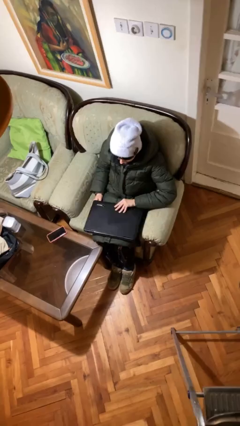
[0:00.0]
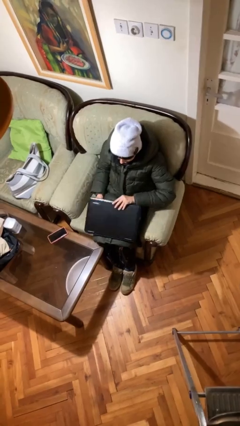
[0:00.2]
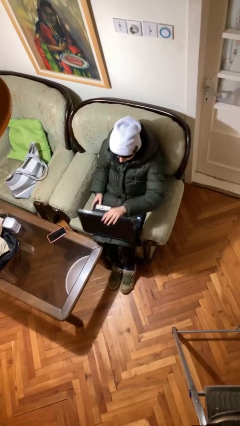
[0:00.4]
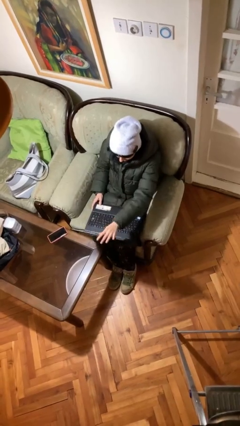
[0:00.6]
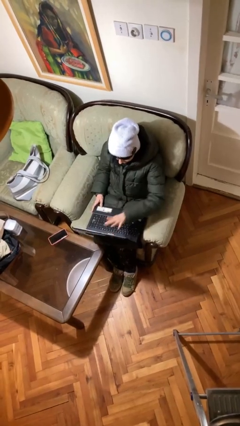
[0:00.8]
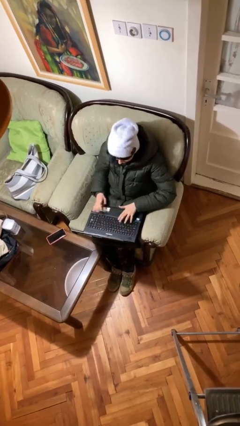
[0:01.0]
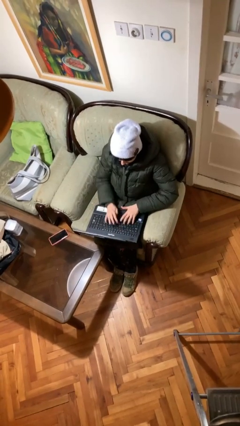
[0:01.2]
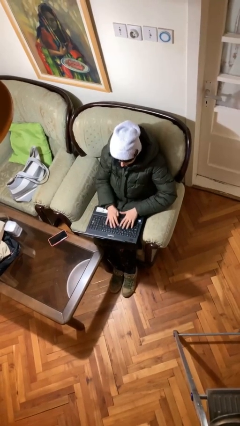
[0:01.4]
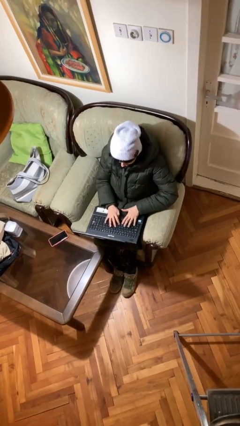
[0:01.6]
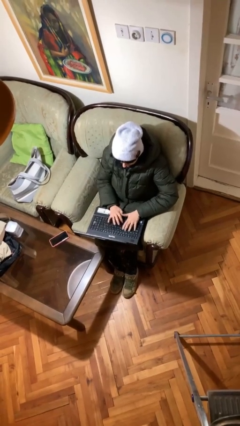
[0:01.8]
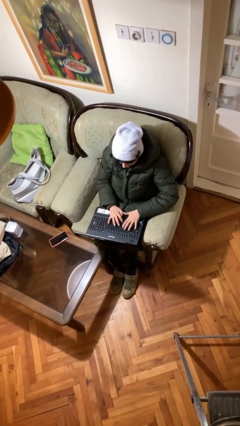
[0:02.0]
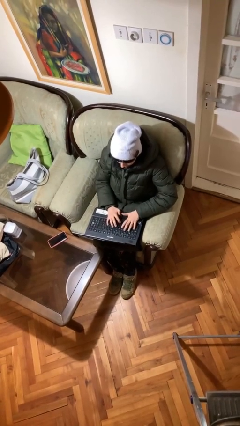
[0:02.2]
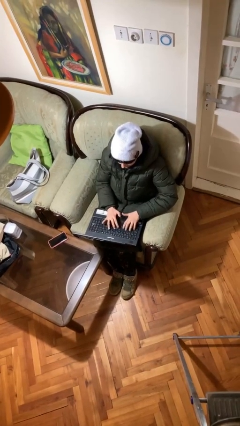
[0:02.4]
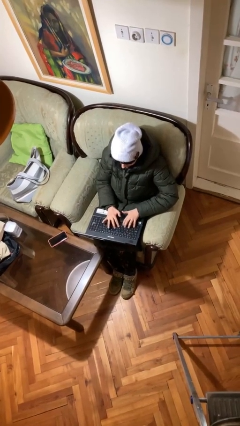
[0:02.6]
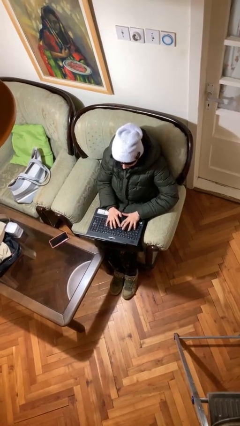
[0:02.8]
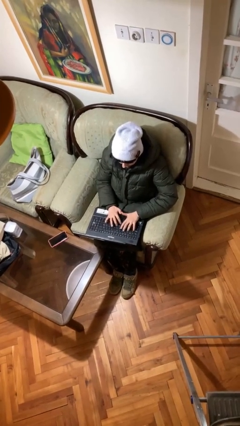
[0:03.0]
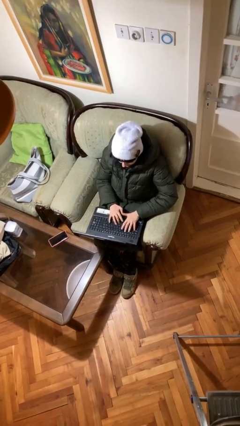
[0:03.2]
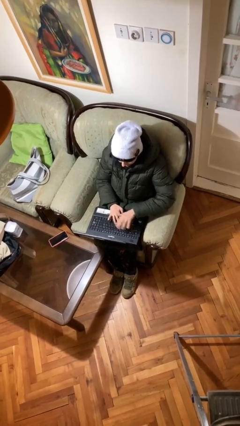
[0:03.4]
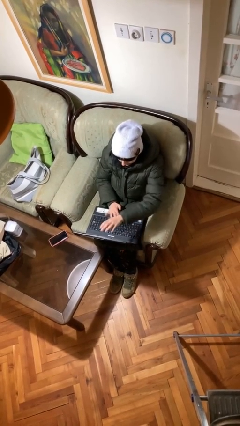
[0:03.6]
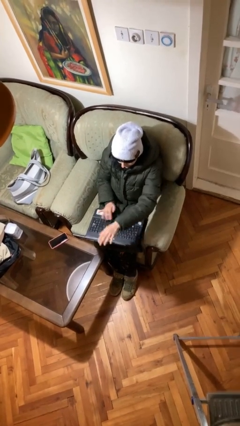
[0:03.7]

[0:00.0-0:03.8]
person interacts with laptop

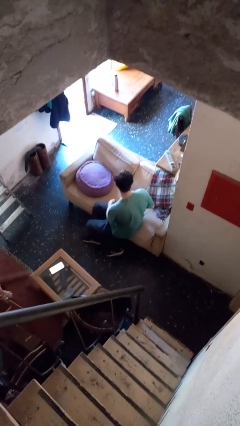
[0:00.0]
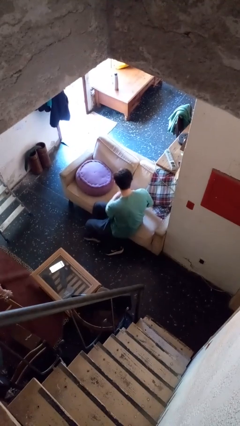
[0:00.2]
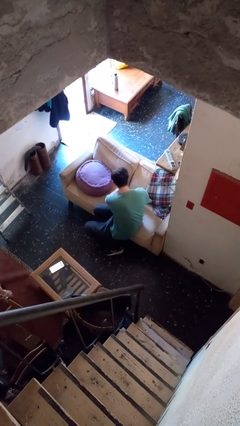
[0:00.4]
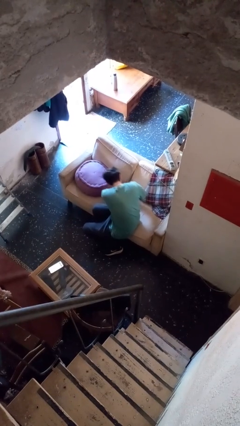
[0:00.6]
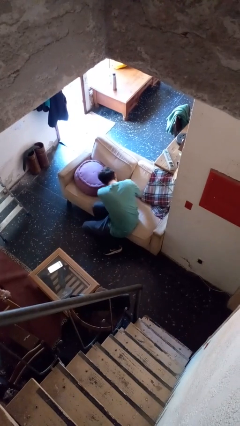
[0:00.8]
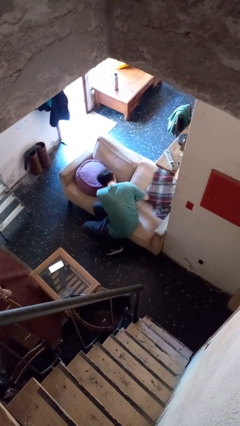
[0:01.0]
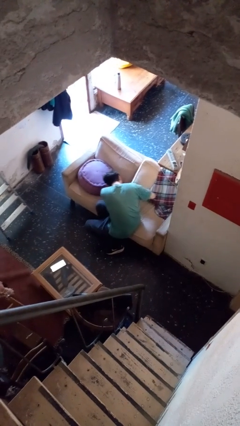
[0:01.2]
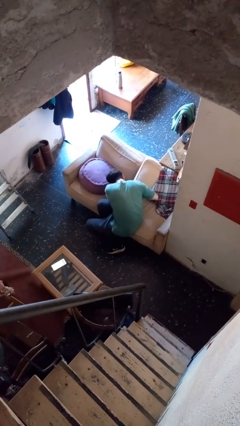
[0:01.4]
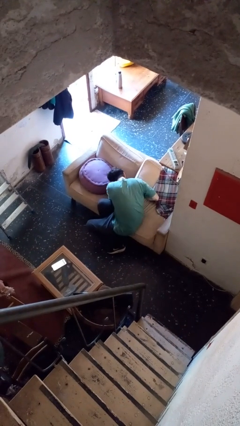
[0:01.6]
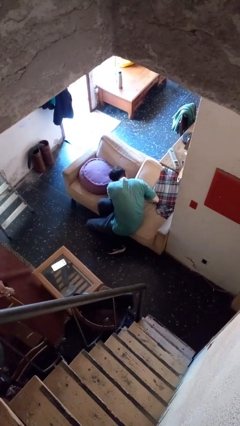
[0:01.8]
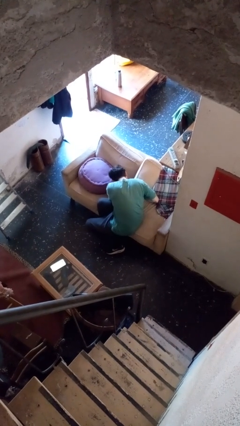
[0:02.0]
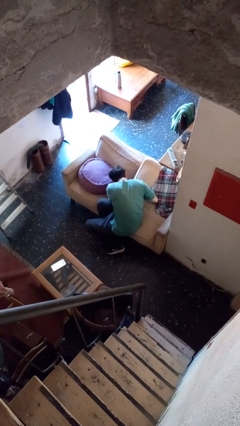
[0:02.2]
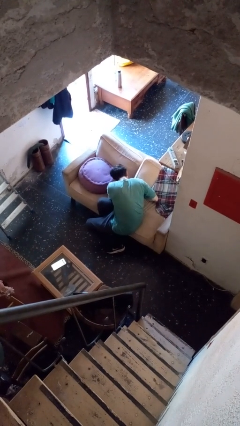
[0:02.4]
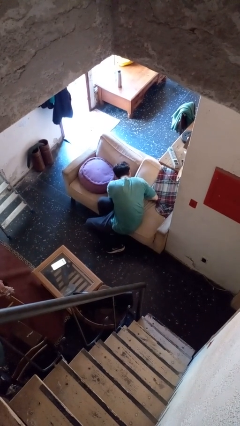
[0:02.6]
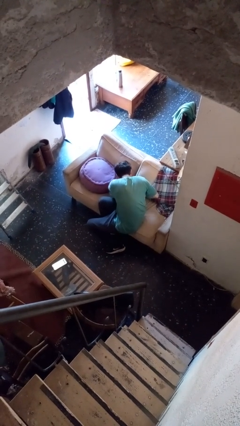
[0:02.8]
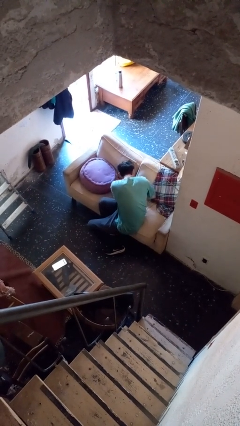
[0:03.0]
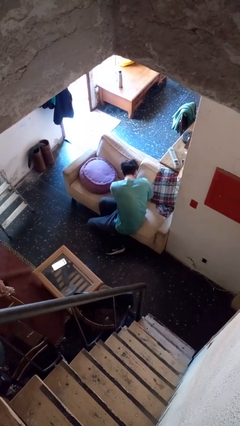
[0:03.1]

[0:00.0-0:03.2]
person searches in couch

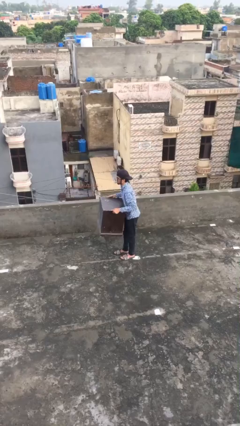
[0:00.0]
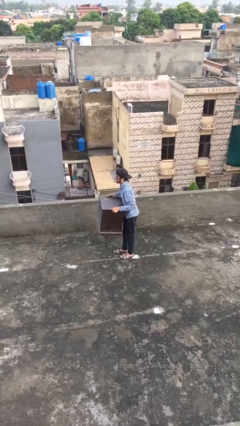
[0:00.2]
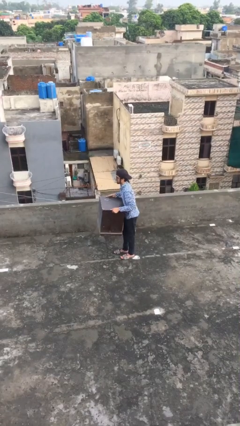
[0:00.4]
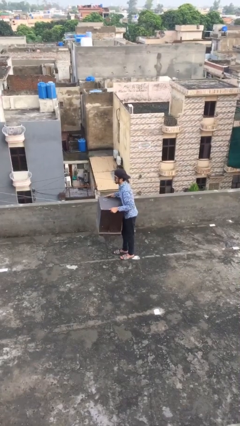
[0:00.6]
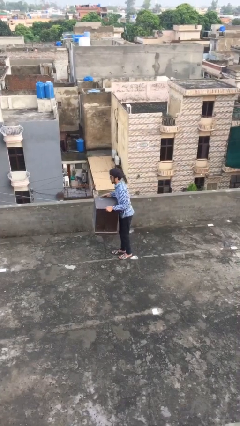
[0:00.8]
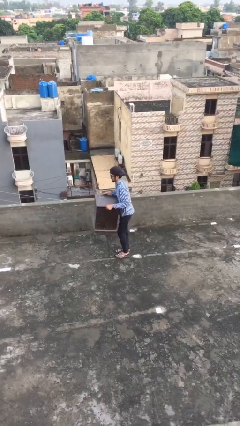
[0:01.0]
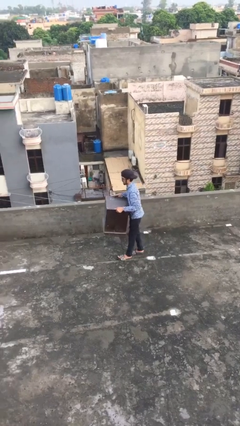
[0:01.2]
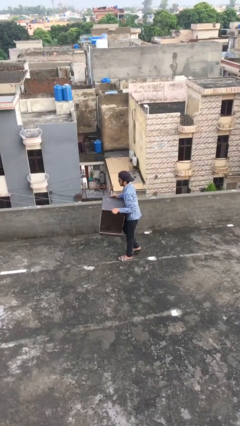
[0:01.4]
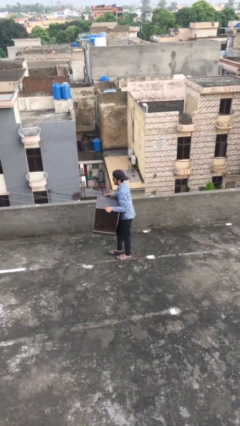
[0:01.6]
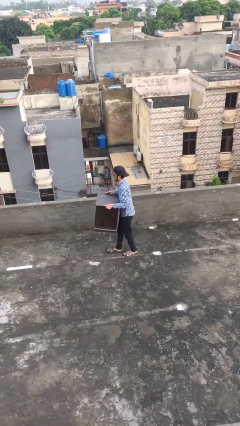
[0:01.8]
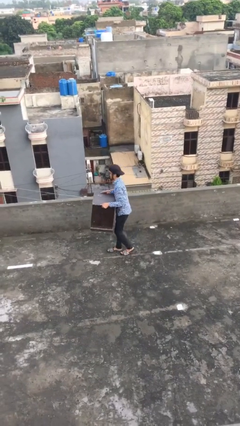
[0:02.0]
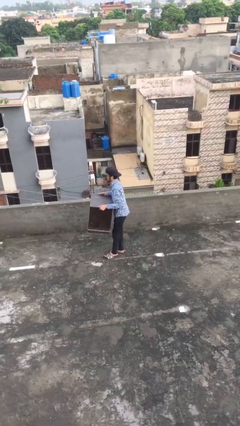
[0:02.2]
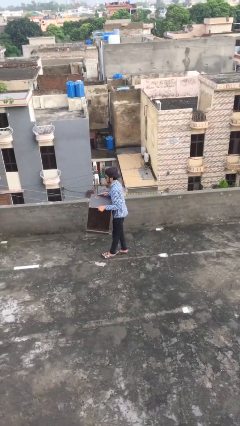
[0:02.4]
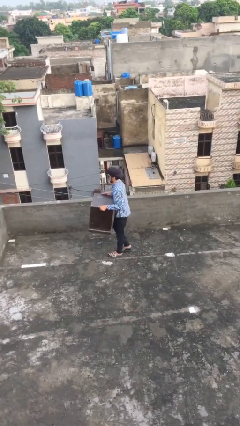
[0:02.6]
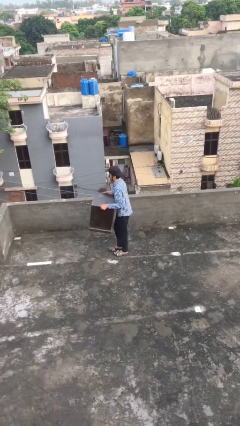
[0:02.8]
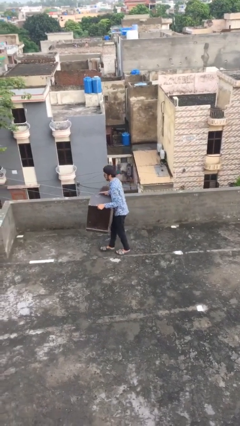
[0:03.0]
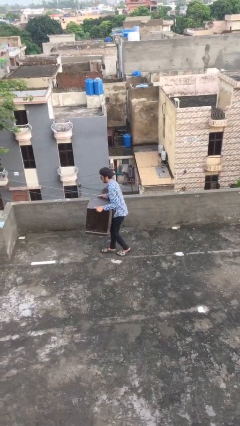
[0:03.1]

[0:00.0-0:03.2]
person carries heavy object

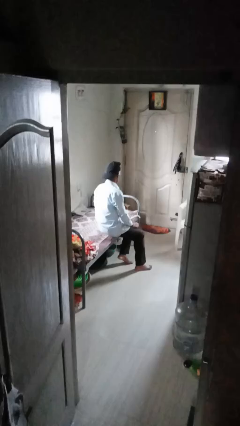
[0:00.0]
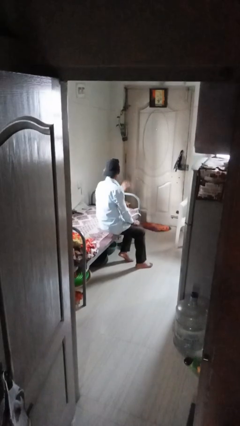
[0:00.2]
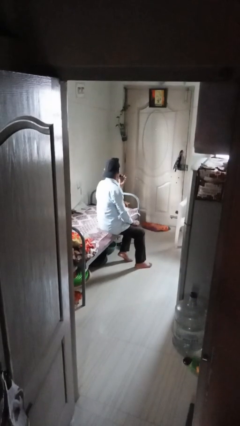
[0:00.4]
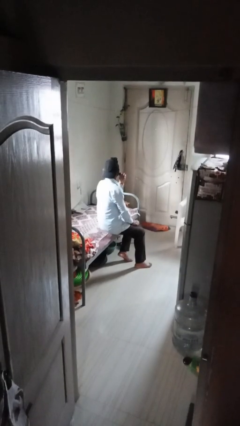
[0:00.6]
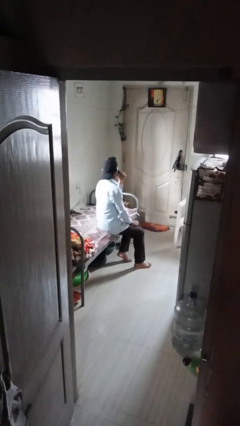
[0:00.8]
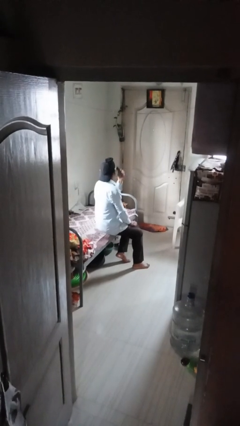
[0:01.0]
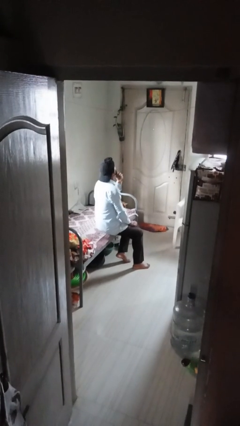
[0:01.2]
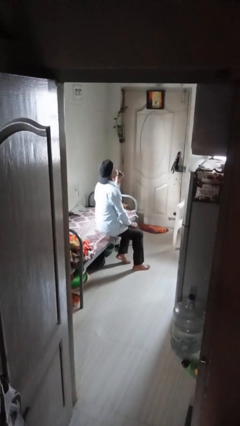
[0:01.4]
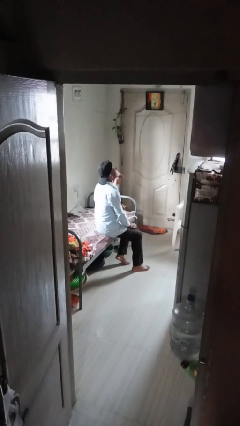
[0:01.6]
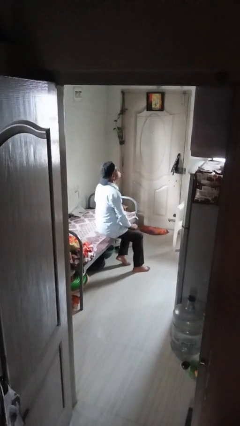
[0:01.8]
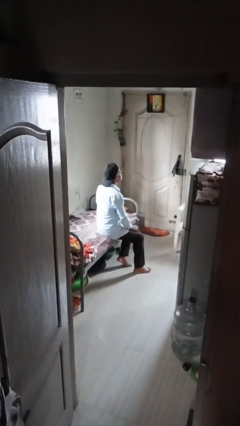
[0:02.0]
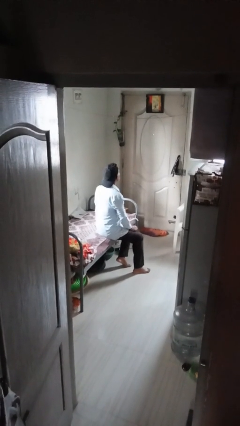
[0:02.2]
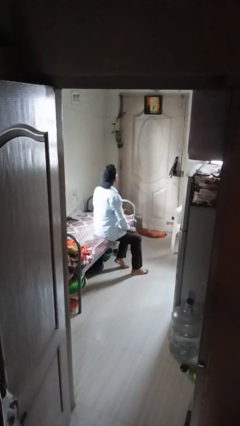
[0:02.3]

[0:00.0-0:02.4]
person applies shaving cream

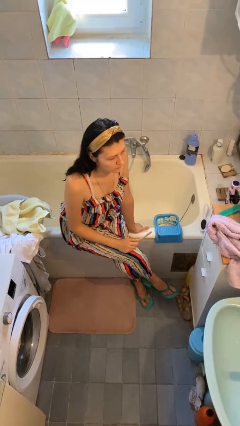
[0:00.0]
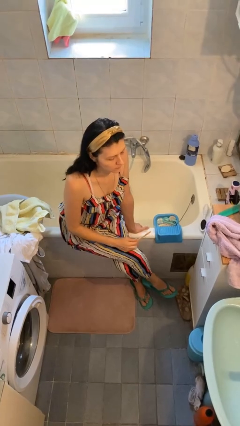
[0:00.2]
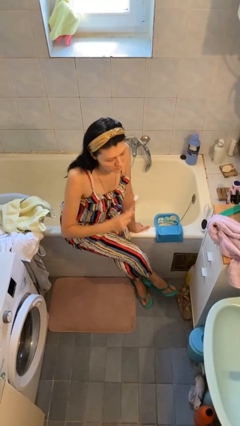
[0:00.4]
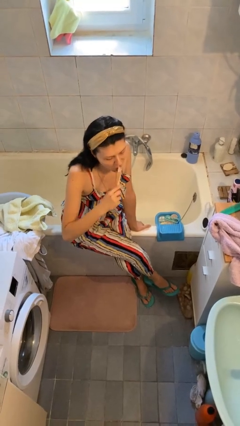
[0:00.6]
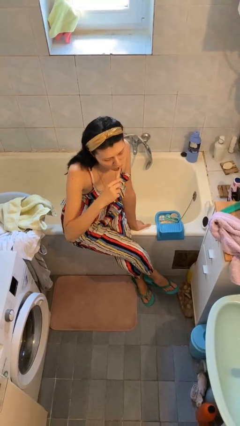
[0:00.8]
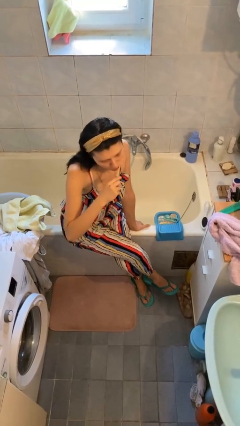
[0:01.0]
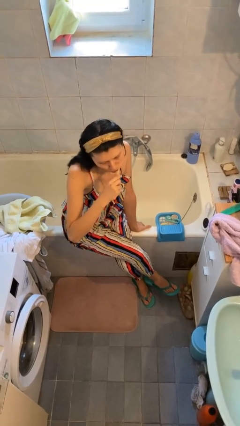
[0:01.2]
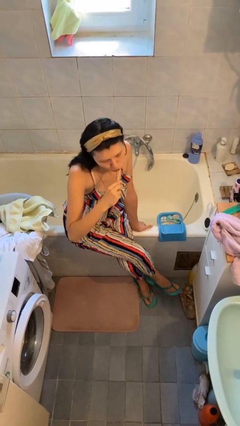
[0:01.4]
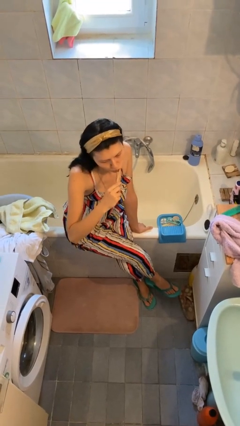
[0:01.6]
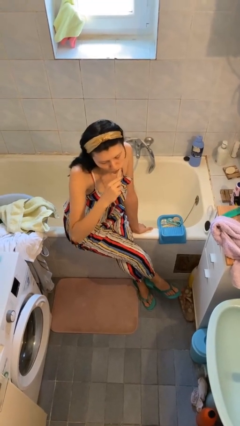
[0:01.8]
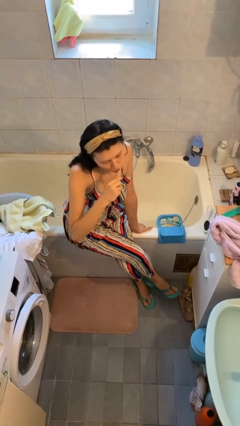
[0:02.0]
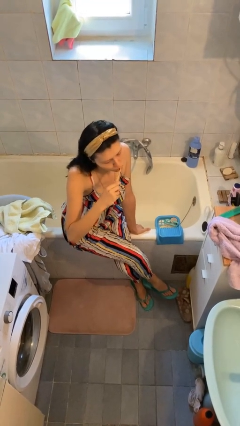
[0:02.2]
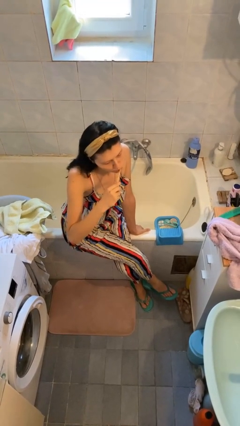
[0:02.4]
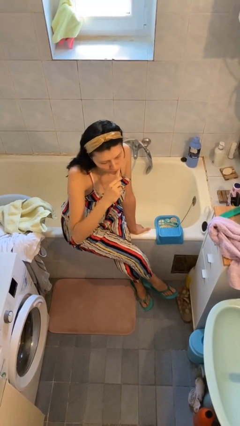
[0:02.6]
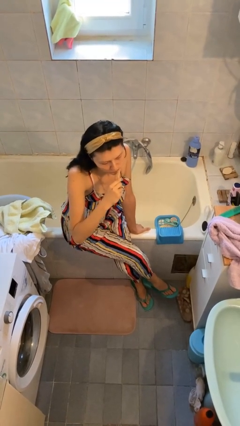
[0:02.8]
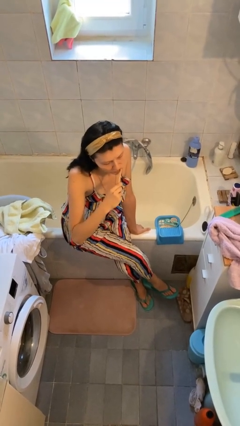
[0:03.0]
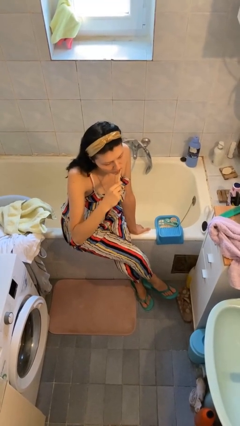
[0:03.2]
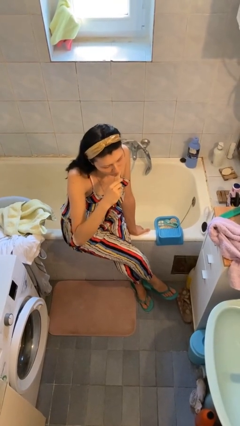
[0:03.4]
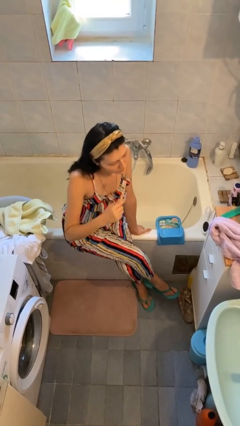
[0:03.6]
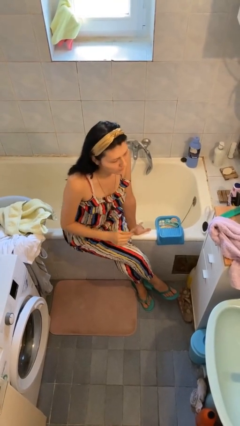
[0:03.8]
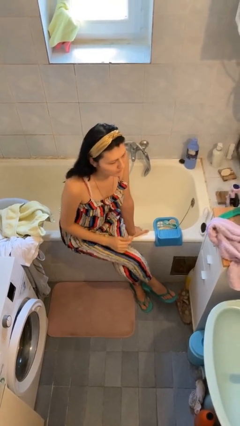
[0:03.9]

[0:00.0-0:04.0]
person brushes teeth

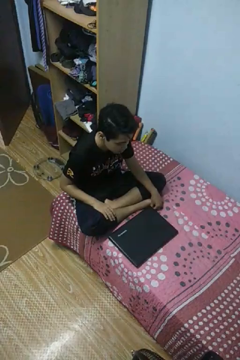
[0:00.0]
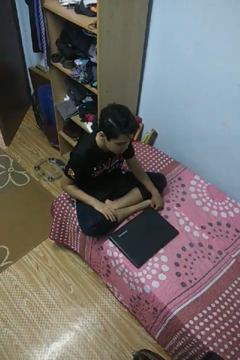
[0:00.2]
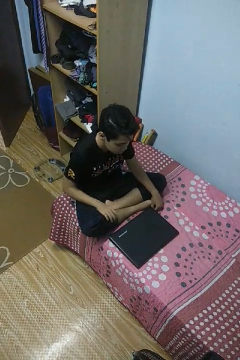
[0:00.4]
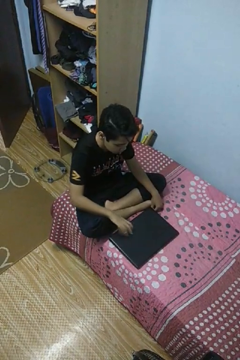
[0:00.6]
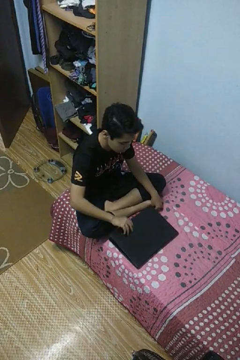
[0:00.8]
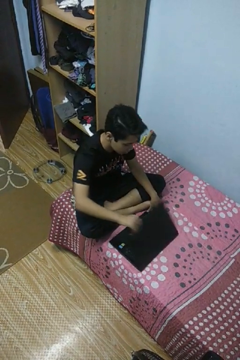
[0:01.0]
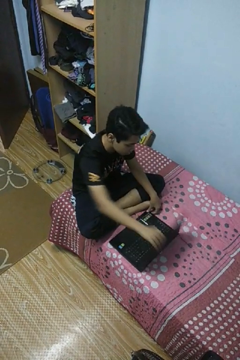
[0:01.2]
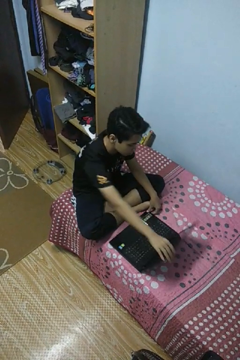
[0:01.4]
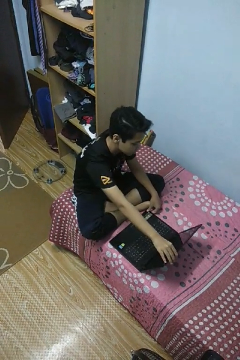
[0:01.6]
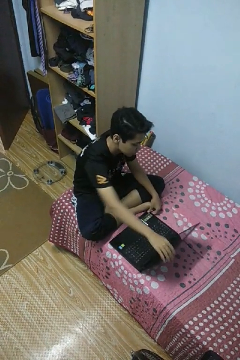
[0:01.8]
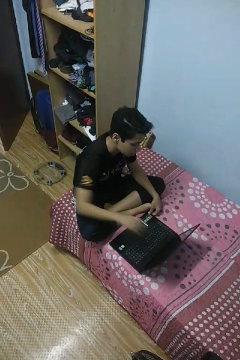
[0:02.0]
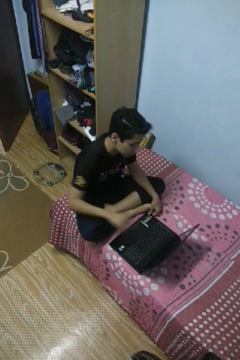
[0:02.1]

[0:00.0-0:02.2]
person opens laptop
